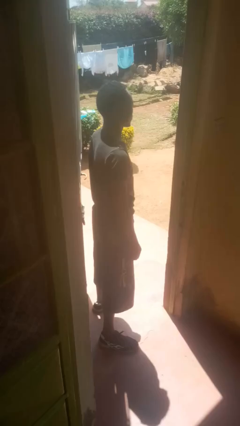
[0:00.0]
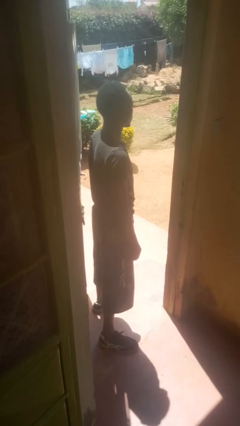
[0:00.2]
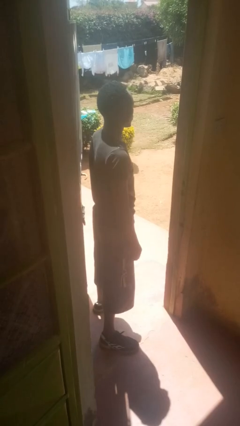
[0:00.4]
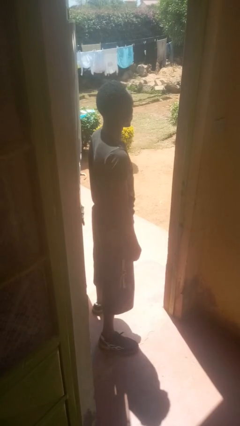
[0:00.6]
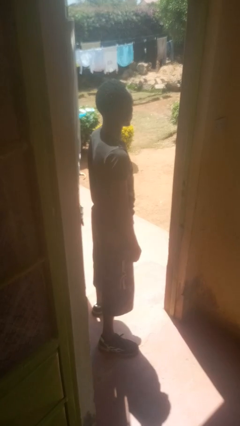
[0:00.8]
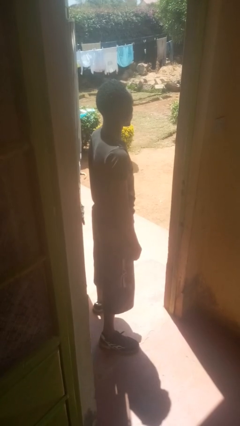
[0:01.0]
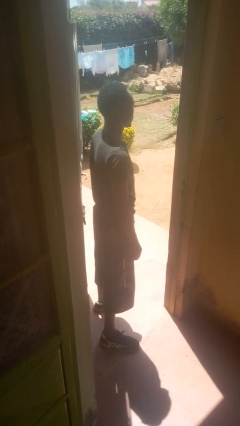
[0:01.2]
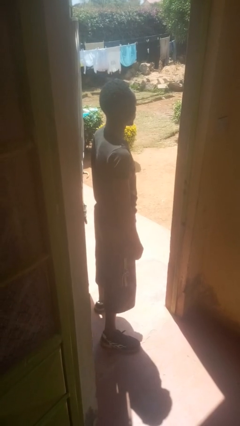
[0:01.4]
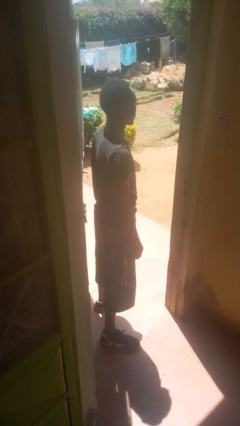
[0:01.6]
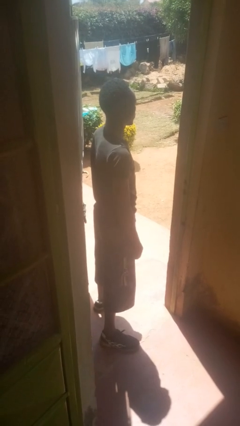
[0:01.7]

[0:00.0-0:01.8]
person cracks knuckles

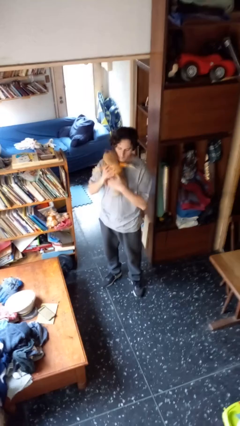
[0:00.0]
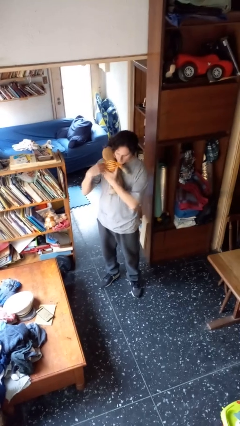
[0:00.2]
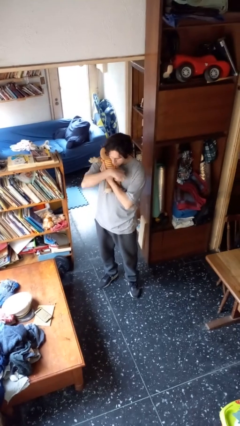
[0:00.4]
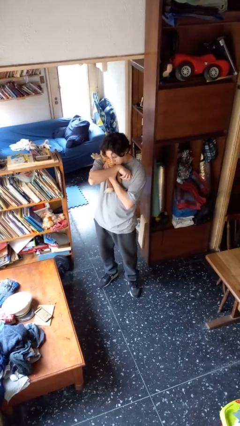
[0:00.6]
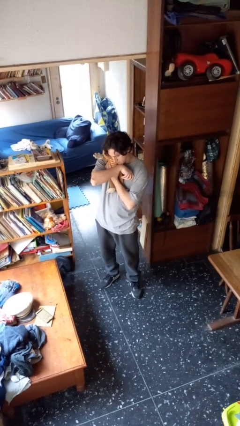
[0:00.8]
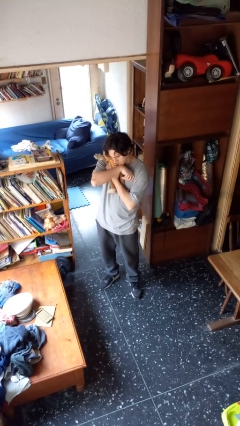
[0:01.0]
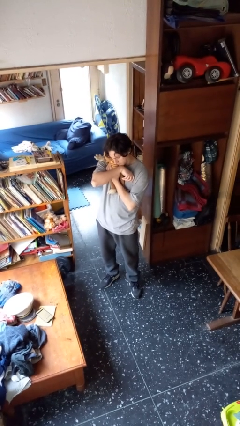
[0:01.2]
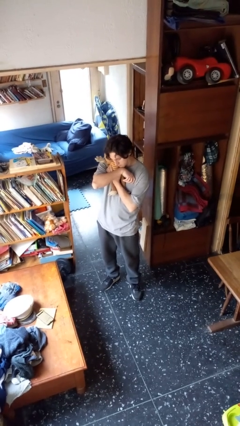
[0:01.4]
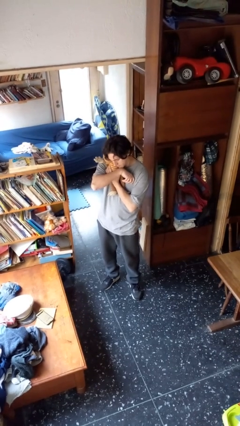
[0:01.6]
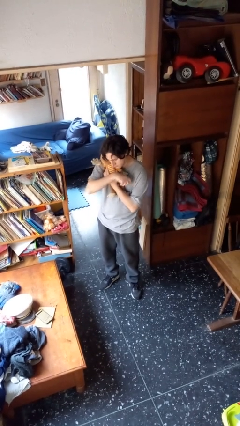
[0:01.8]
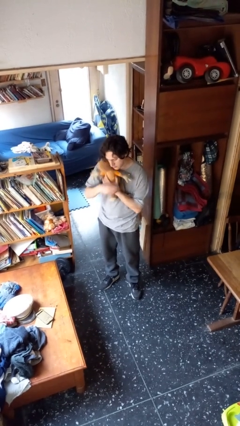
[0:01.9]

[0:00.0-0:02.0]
person hugs stuffed animal

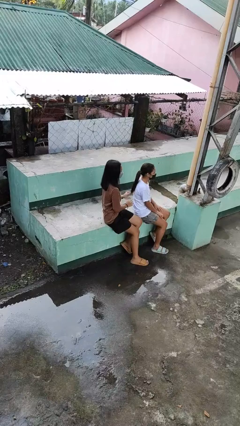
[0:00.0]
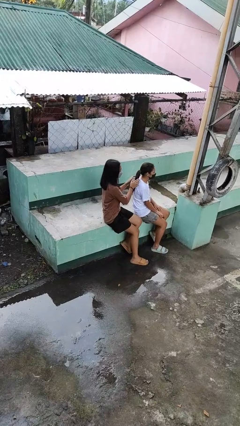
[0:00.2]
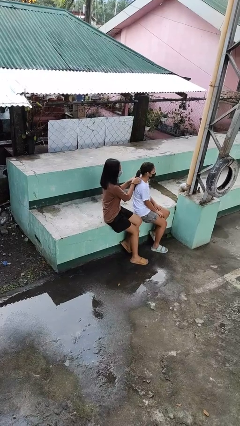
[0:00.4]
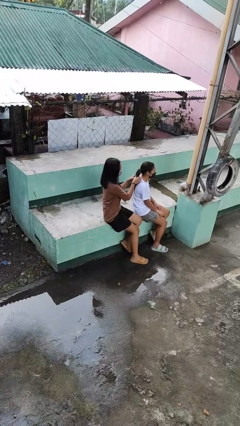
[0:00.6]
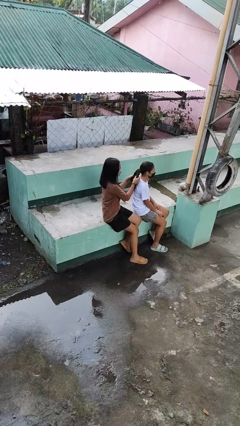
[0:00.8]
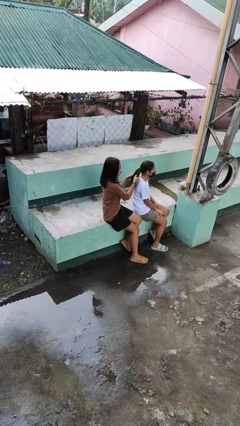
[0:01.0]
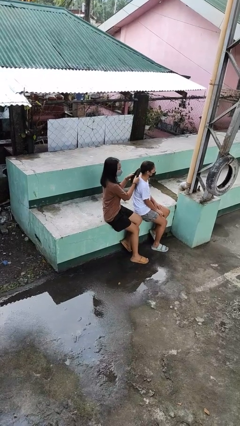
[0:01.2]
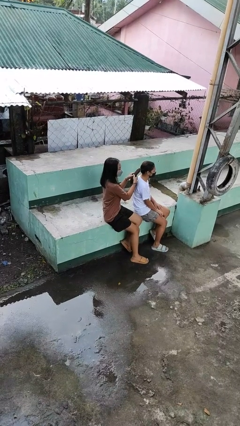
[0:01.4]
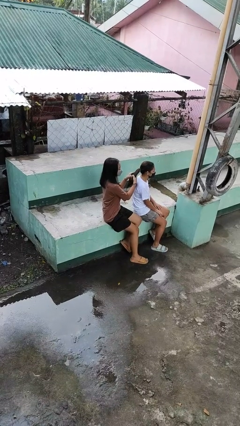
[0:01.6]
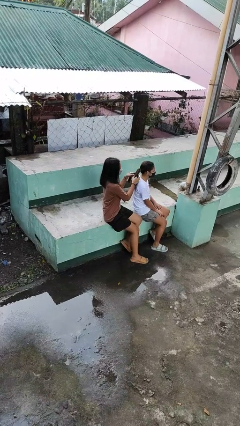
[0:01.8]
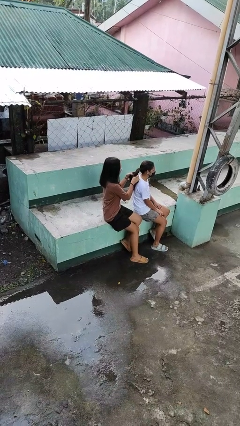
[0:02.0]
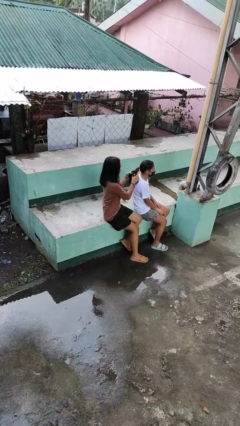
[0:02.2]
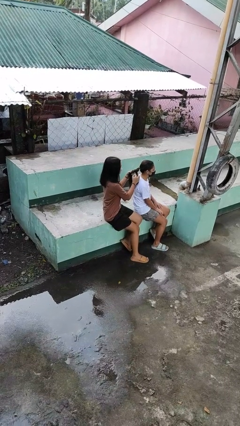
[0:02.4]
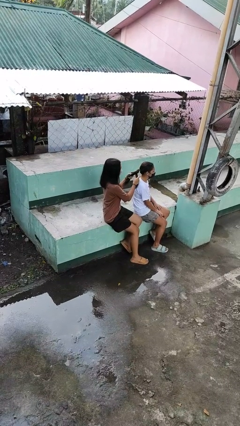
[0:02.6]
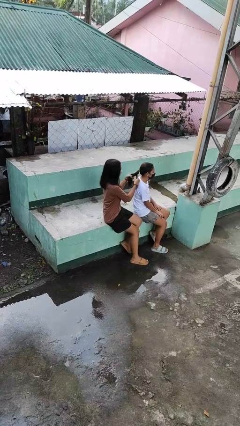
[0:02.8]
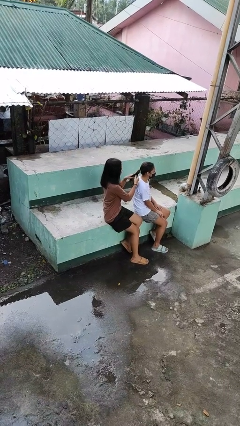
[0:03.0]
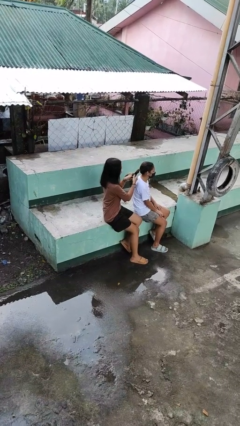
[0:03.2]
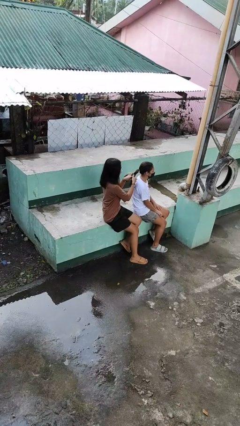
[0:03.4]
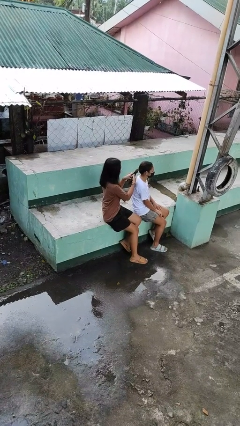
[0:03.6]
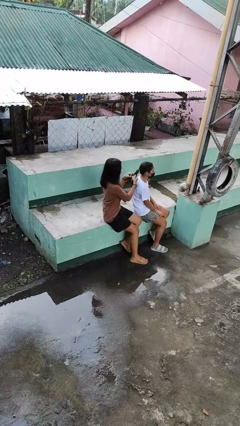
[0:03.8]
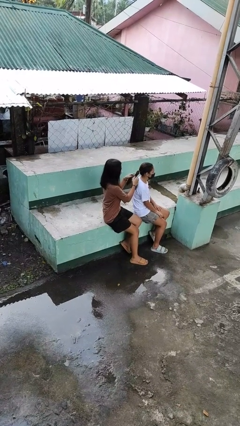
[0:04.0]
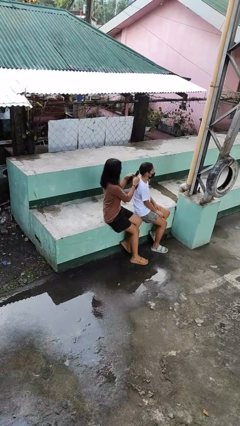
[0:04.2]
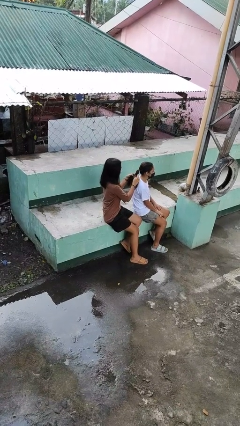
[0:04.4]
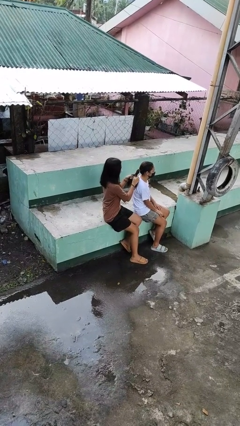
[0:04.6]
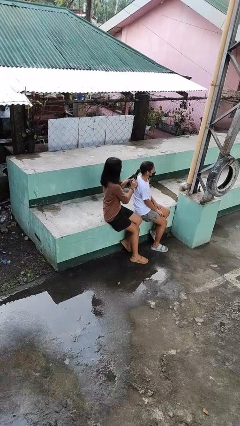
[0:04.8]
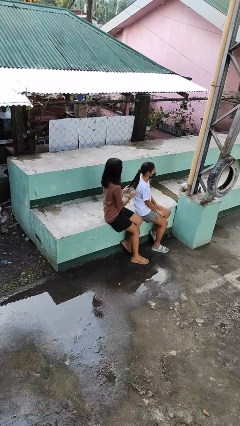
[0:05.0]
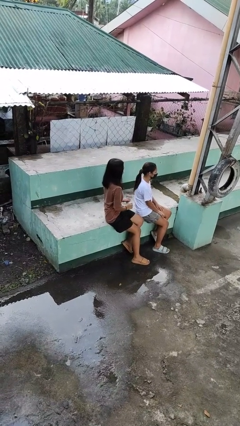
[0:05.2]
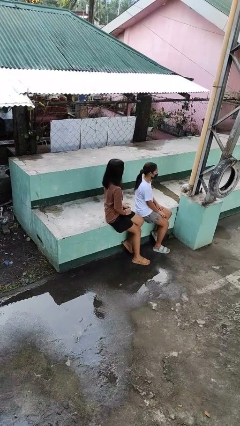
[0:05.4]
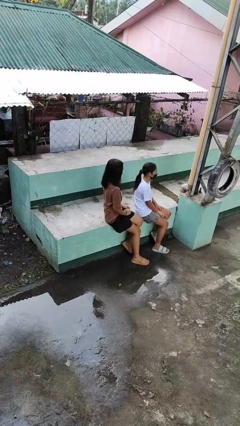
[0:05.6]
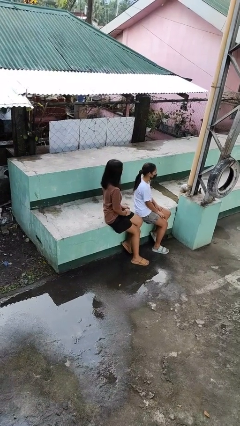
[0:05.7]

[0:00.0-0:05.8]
person braids hair of person

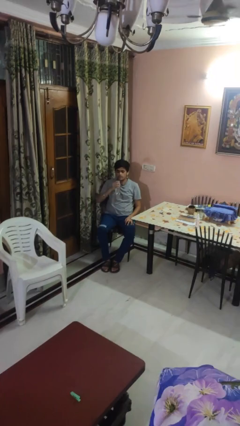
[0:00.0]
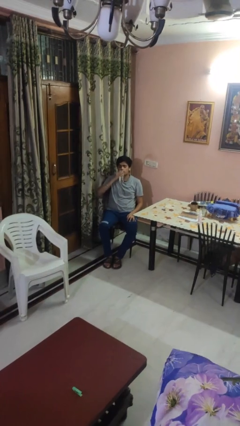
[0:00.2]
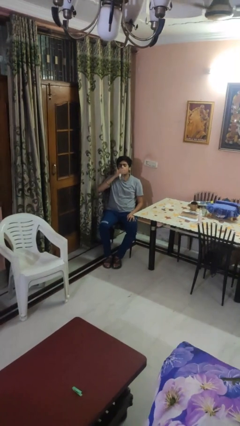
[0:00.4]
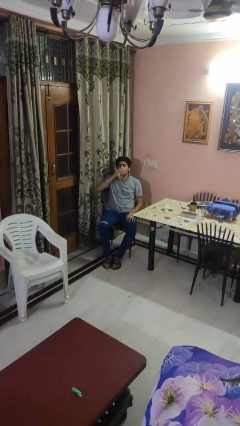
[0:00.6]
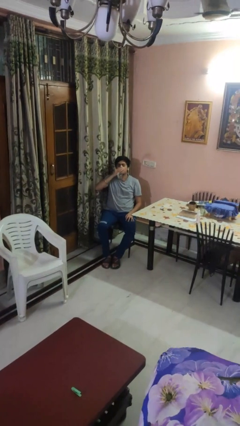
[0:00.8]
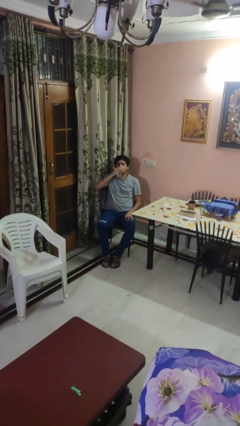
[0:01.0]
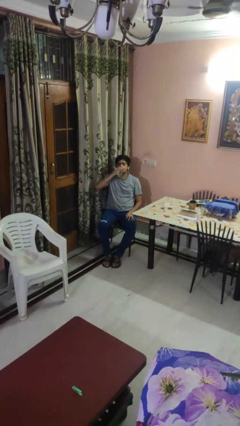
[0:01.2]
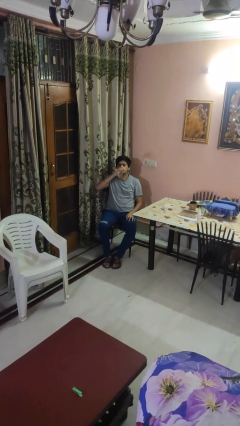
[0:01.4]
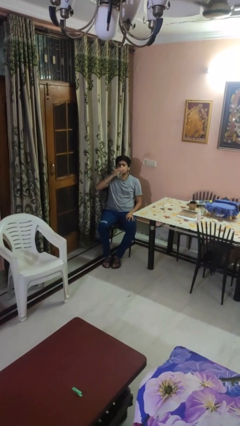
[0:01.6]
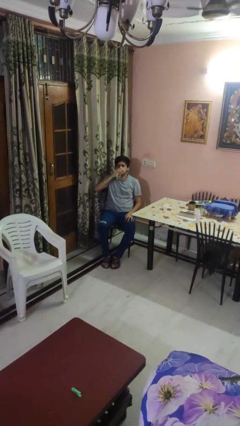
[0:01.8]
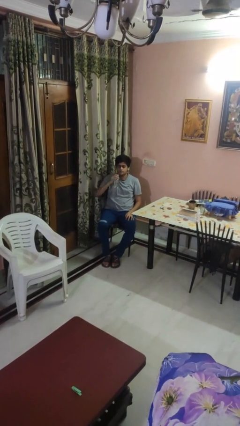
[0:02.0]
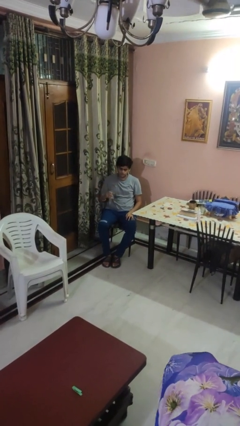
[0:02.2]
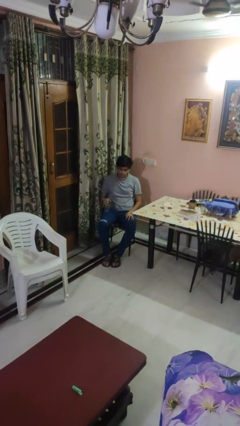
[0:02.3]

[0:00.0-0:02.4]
person drinks from bottle

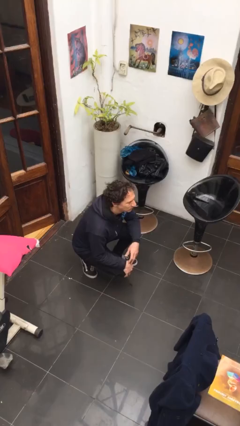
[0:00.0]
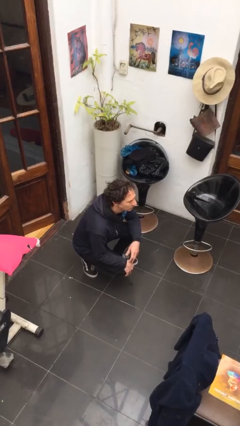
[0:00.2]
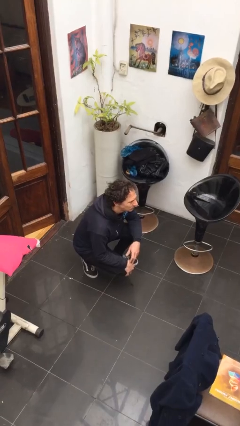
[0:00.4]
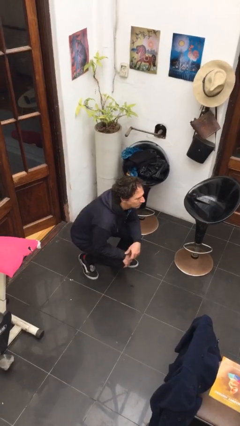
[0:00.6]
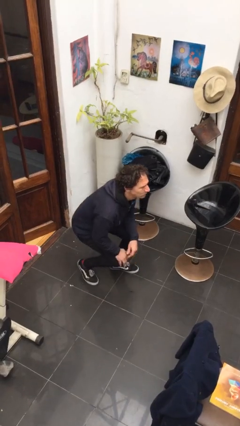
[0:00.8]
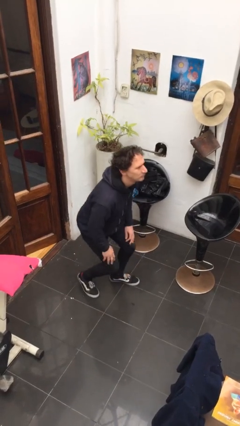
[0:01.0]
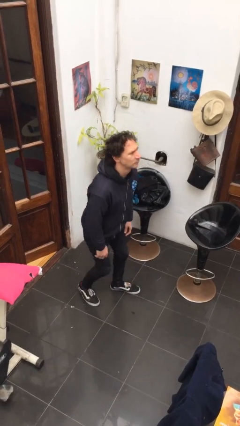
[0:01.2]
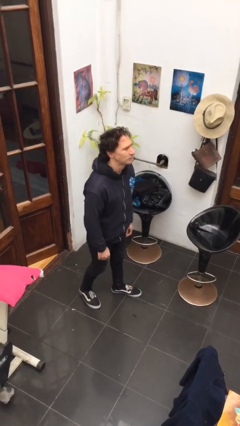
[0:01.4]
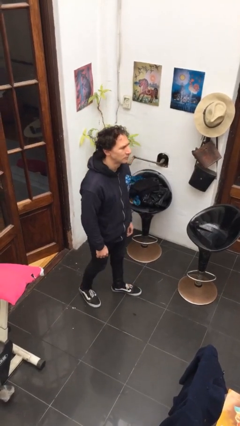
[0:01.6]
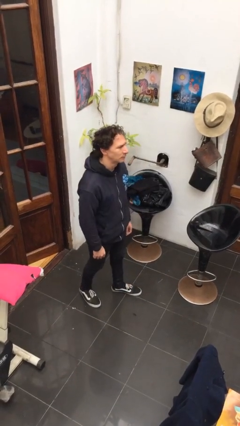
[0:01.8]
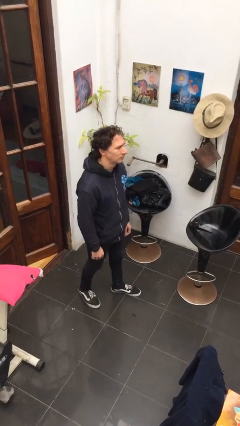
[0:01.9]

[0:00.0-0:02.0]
person stands up

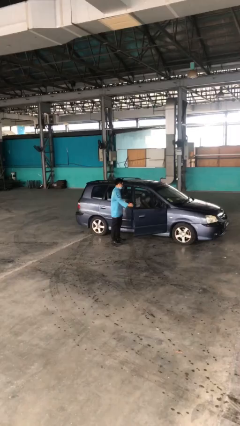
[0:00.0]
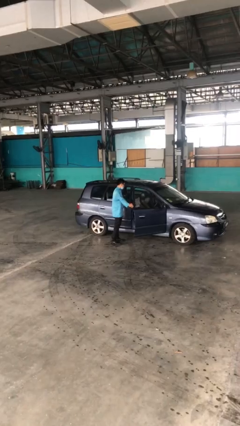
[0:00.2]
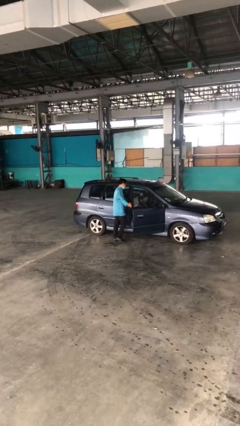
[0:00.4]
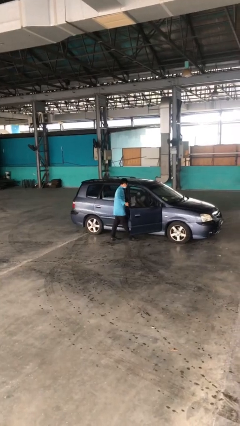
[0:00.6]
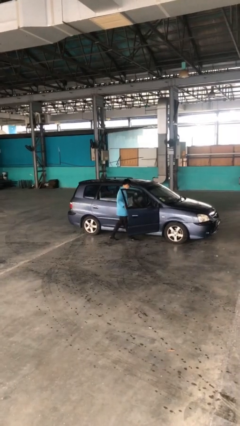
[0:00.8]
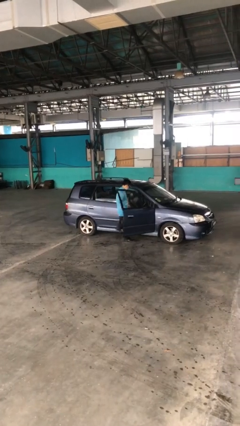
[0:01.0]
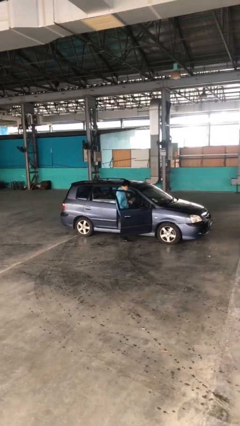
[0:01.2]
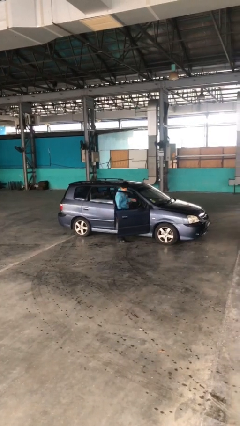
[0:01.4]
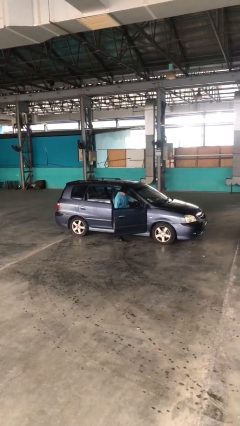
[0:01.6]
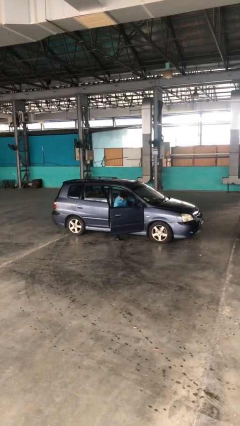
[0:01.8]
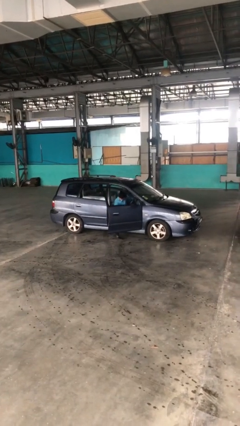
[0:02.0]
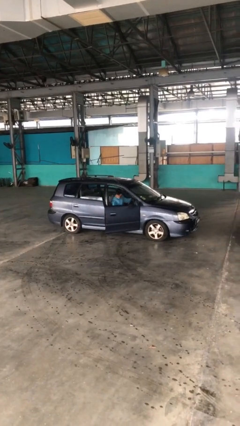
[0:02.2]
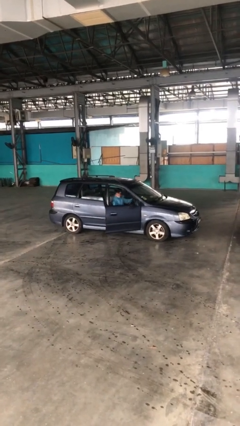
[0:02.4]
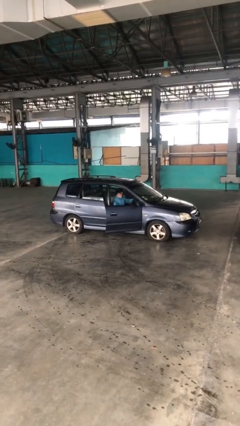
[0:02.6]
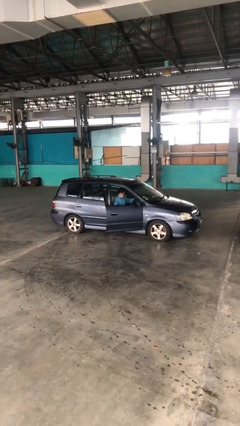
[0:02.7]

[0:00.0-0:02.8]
person enters car

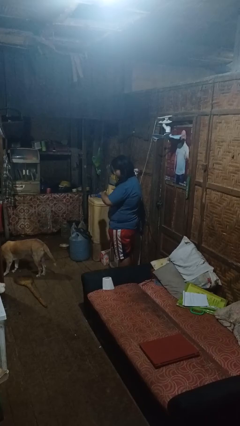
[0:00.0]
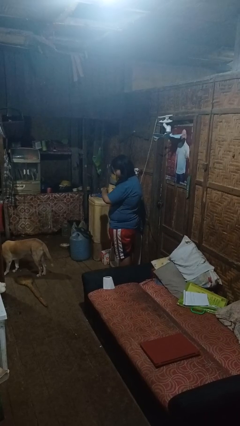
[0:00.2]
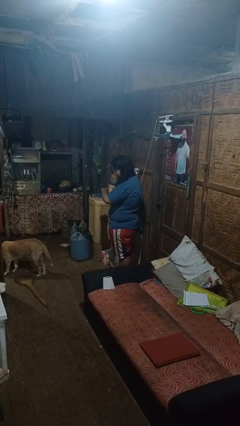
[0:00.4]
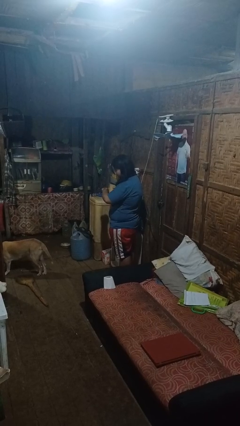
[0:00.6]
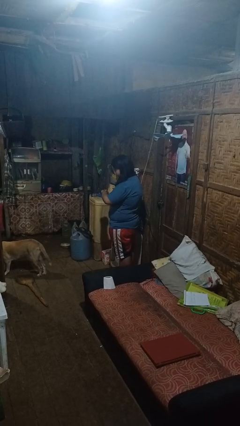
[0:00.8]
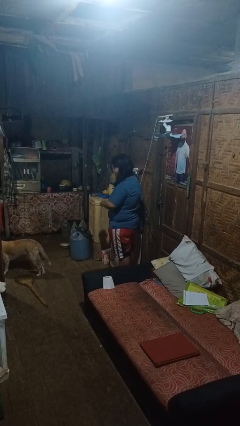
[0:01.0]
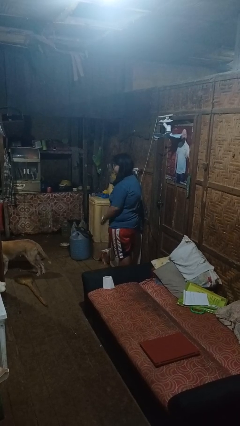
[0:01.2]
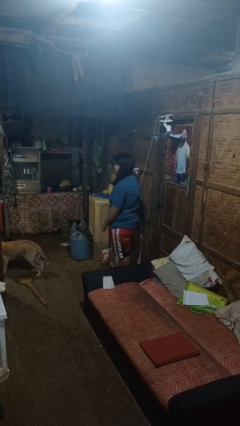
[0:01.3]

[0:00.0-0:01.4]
person looks at wristwatch
